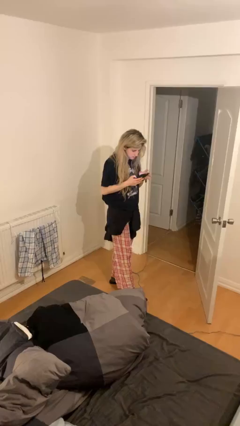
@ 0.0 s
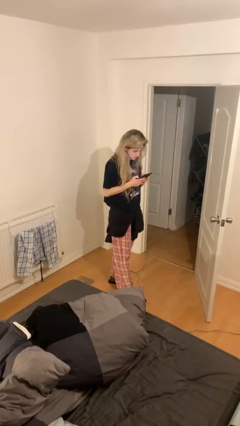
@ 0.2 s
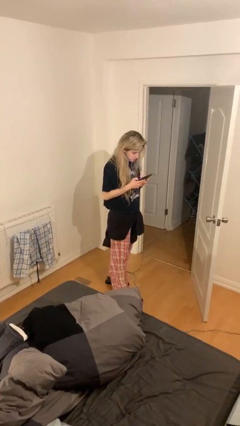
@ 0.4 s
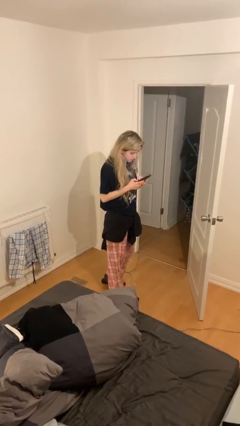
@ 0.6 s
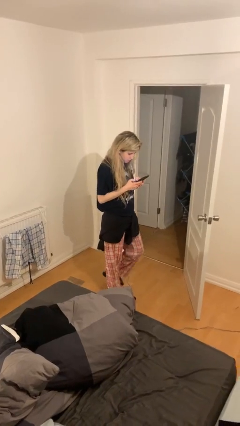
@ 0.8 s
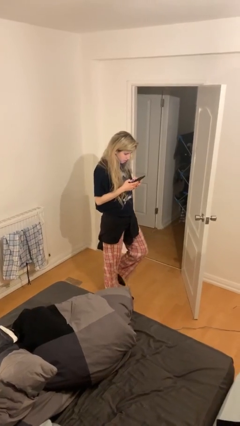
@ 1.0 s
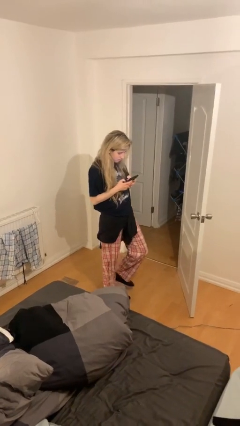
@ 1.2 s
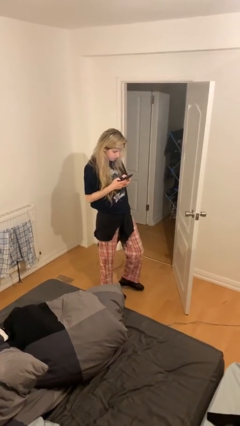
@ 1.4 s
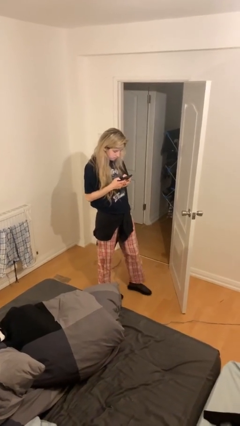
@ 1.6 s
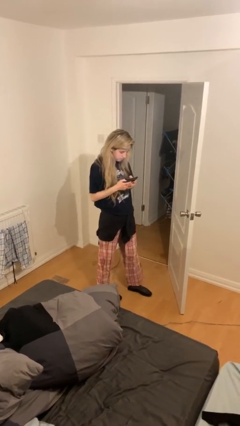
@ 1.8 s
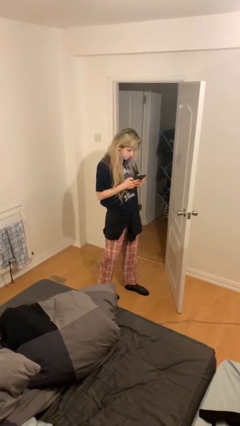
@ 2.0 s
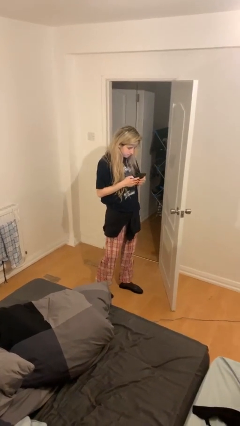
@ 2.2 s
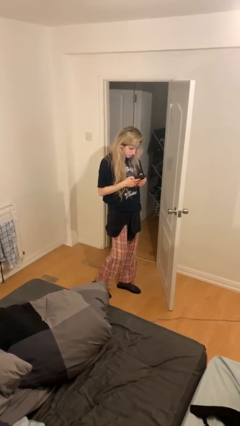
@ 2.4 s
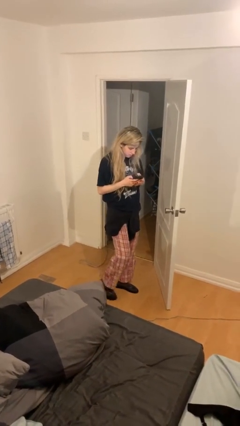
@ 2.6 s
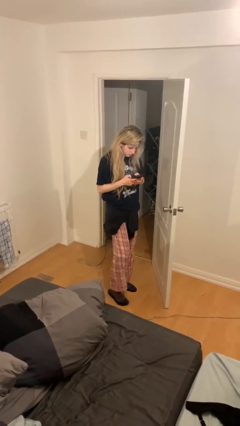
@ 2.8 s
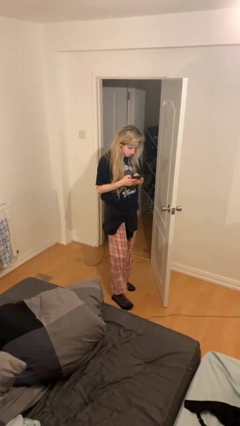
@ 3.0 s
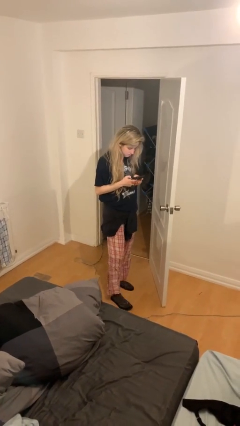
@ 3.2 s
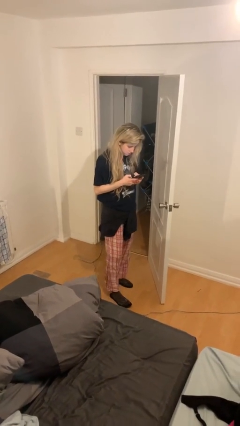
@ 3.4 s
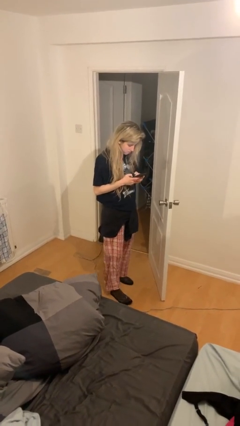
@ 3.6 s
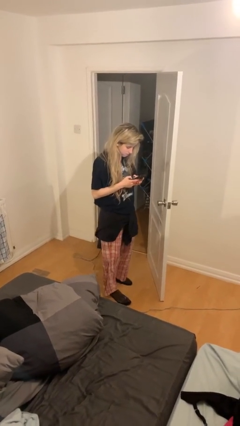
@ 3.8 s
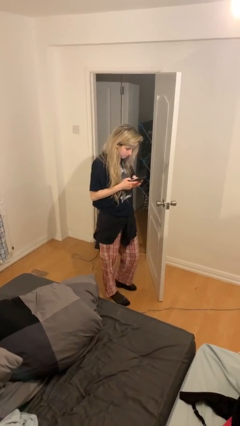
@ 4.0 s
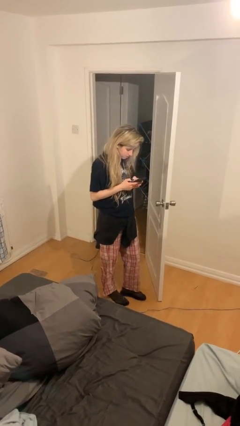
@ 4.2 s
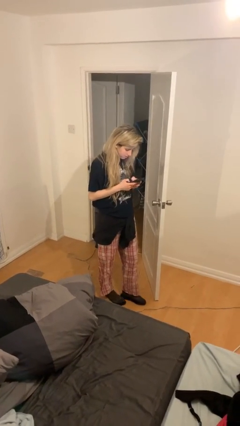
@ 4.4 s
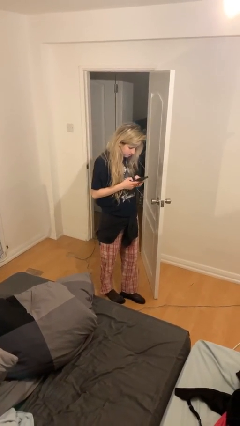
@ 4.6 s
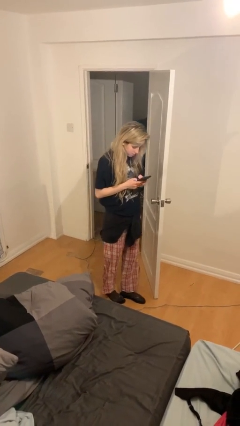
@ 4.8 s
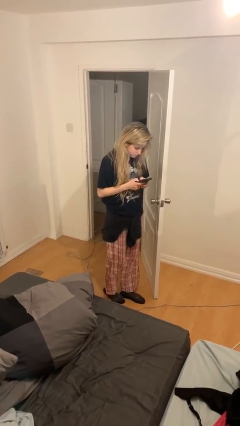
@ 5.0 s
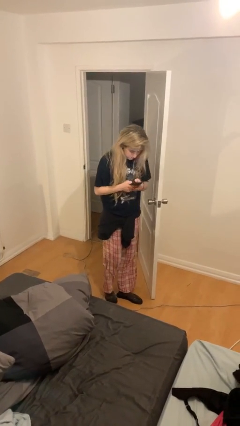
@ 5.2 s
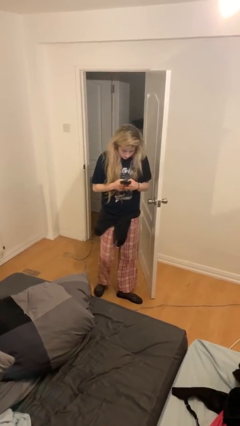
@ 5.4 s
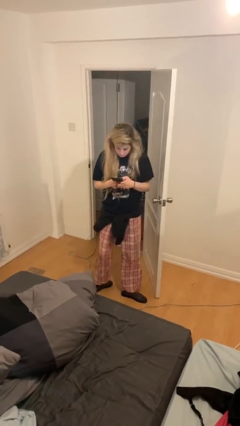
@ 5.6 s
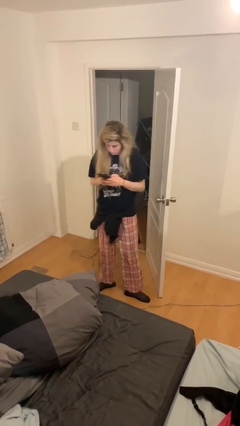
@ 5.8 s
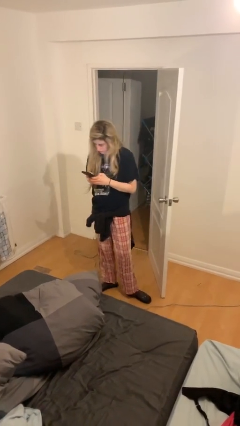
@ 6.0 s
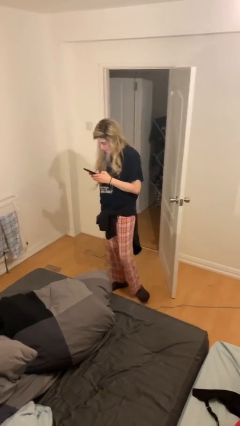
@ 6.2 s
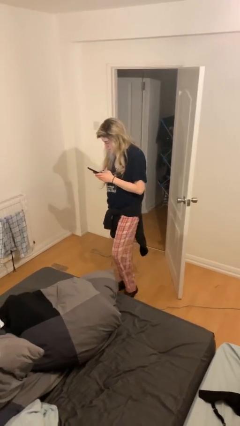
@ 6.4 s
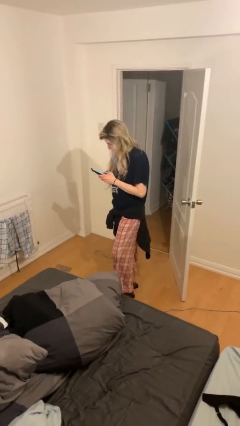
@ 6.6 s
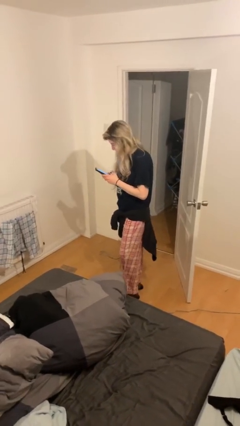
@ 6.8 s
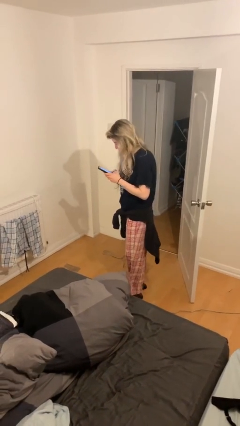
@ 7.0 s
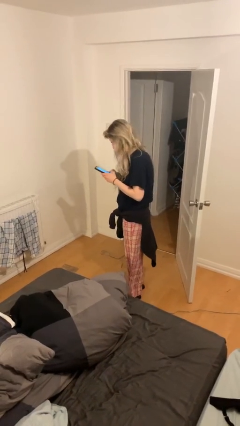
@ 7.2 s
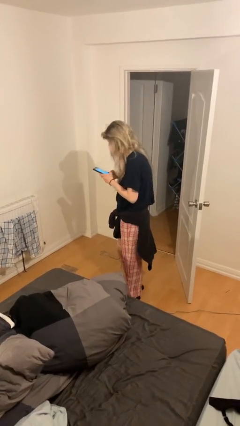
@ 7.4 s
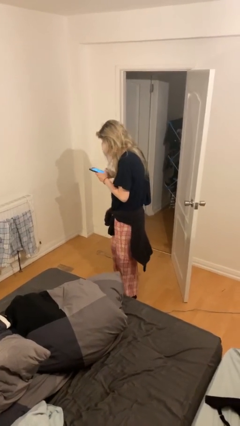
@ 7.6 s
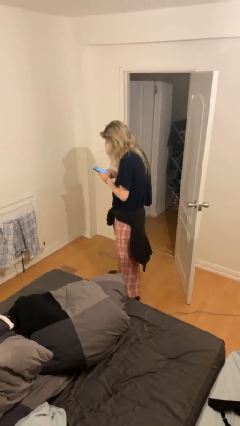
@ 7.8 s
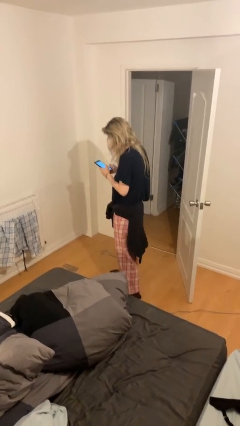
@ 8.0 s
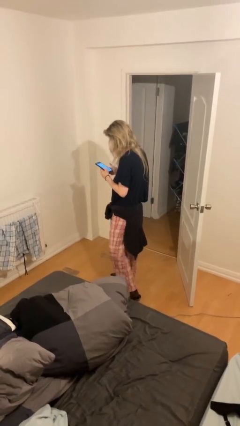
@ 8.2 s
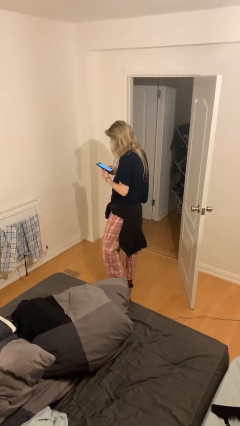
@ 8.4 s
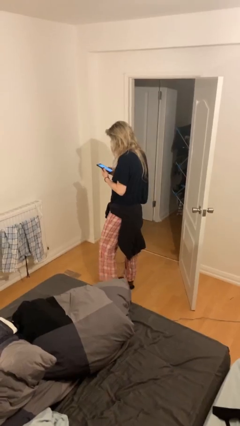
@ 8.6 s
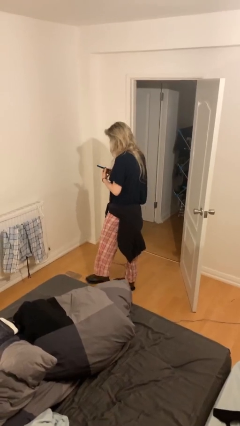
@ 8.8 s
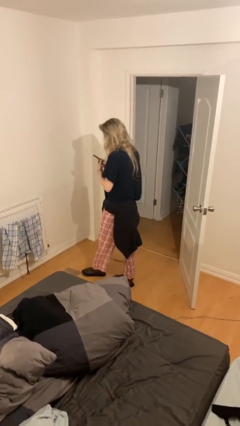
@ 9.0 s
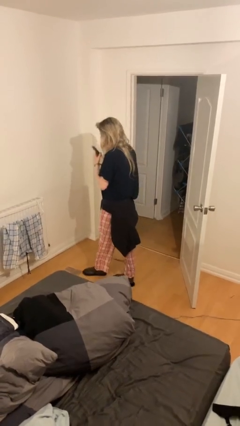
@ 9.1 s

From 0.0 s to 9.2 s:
person texts on phone

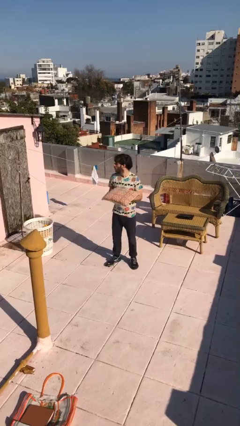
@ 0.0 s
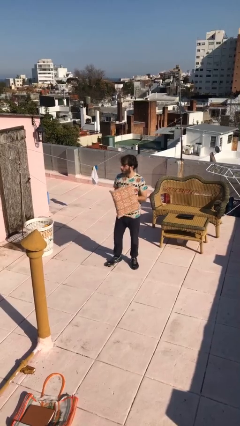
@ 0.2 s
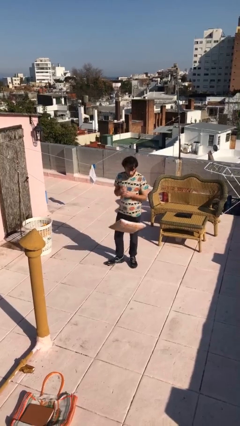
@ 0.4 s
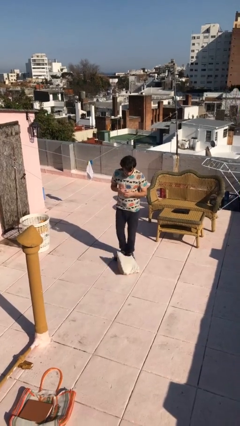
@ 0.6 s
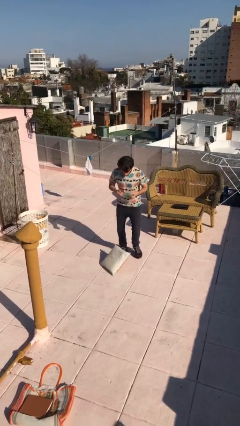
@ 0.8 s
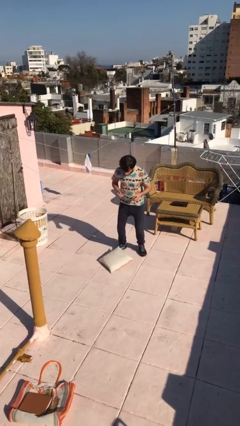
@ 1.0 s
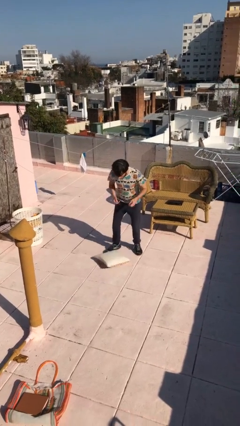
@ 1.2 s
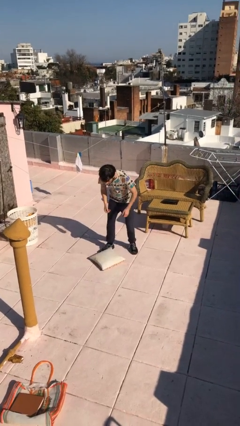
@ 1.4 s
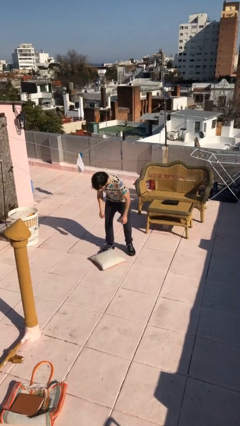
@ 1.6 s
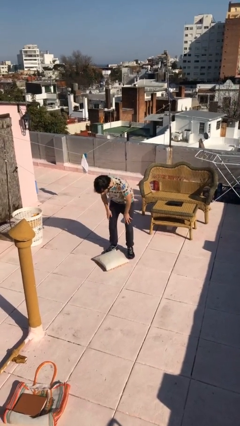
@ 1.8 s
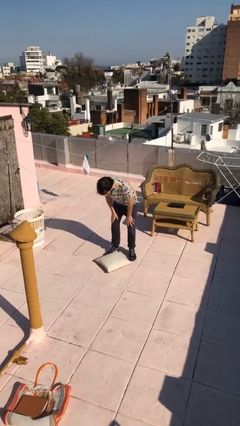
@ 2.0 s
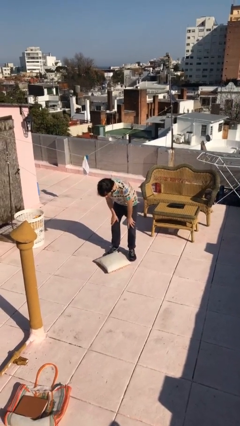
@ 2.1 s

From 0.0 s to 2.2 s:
person drops object

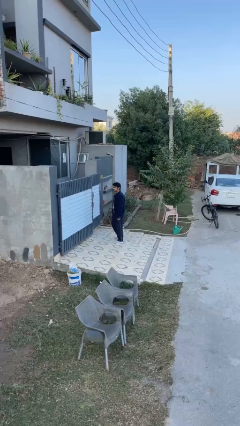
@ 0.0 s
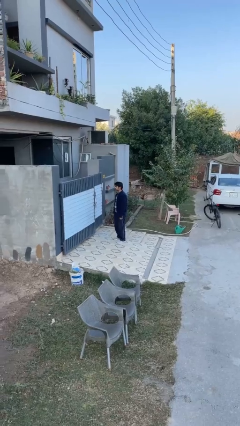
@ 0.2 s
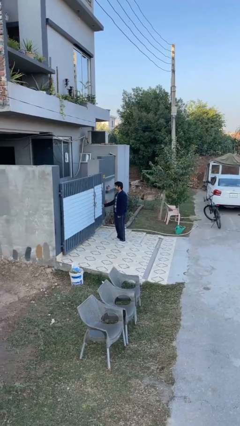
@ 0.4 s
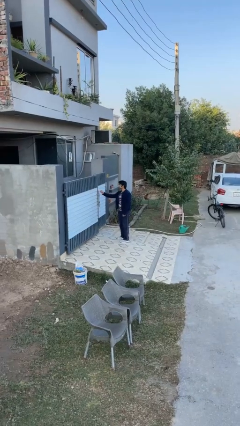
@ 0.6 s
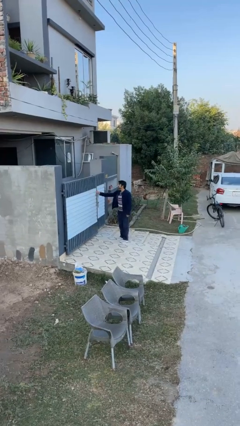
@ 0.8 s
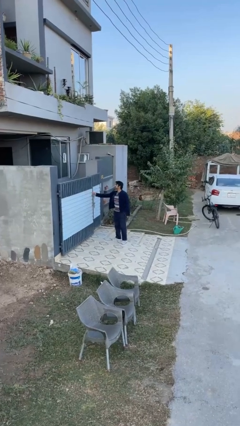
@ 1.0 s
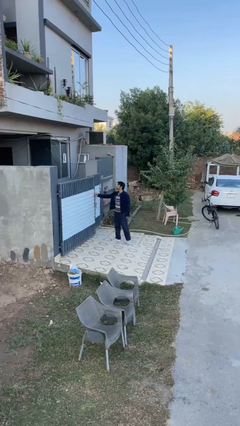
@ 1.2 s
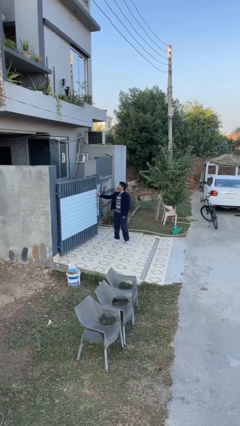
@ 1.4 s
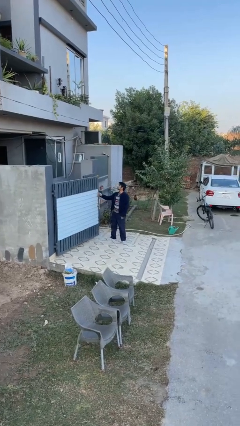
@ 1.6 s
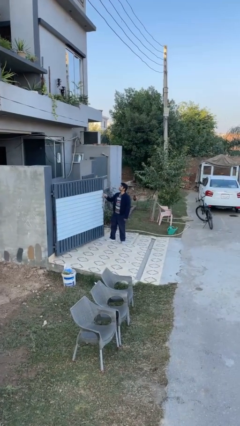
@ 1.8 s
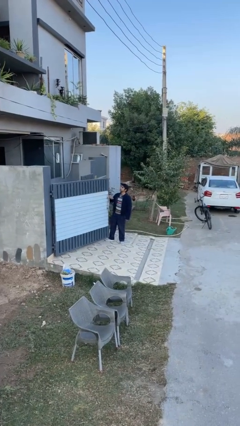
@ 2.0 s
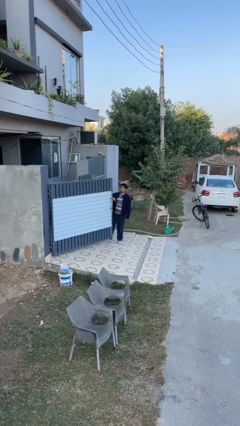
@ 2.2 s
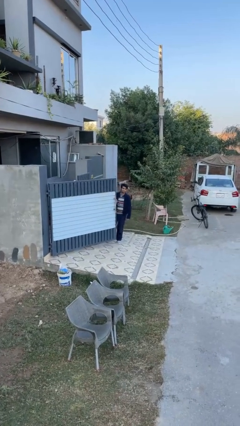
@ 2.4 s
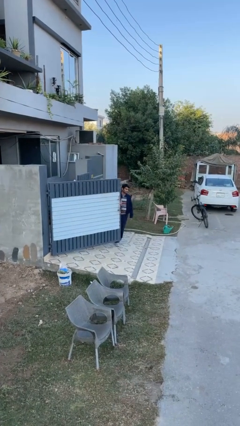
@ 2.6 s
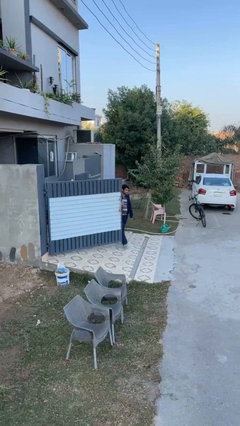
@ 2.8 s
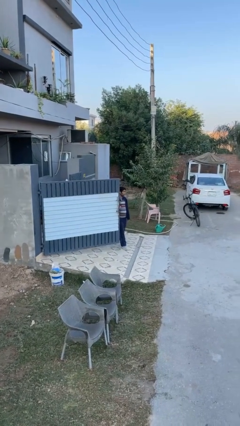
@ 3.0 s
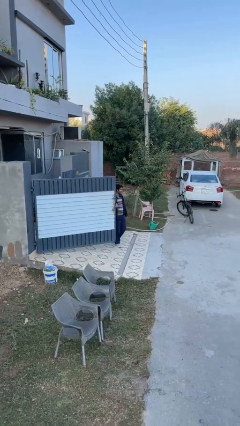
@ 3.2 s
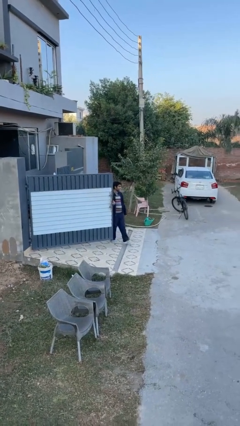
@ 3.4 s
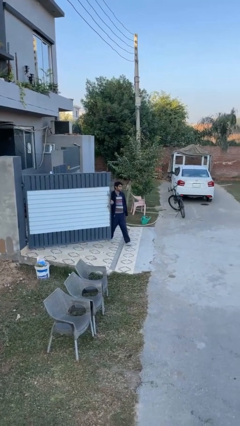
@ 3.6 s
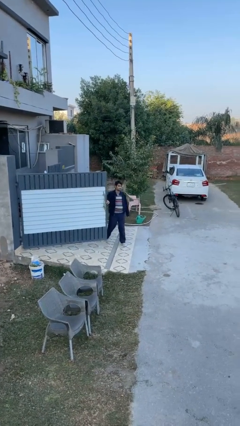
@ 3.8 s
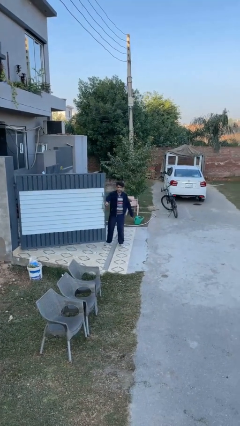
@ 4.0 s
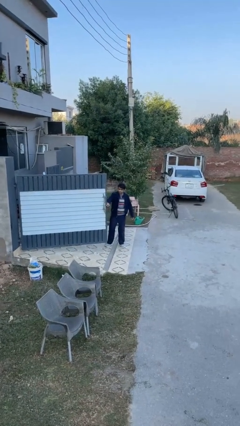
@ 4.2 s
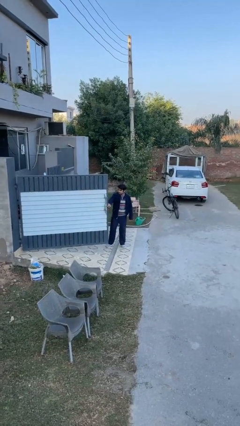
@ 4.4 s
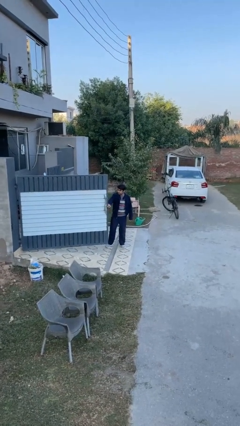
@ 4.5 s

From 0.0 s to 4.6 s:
person opens facility door

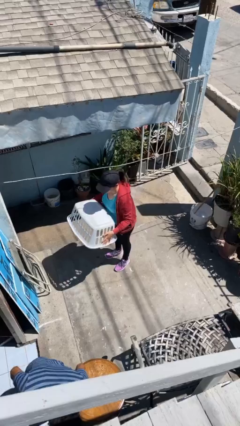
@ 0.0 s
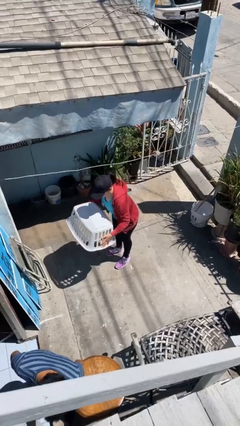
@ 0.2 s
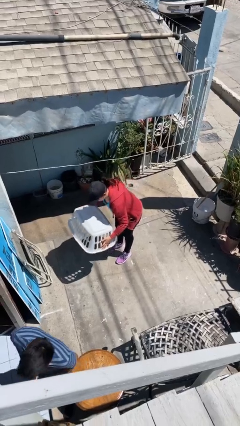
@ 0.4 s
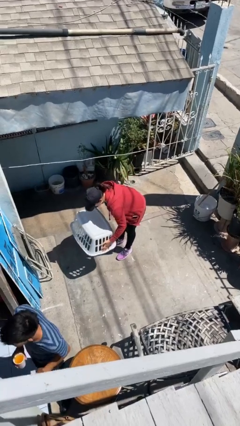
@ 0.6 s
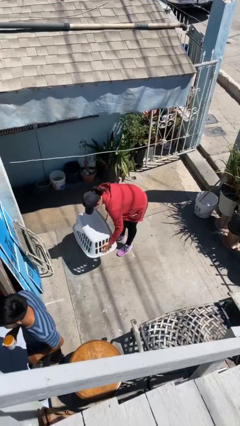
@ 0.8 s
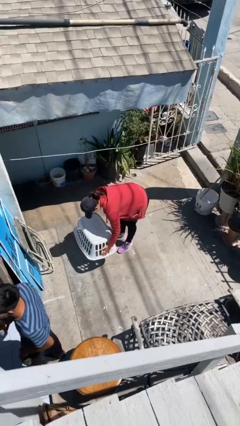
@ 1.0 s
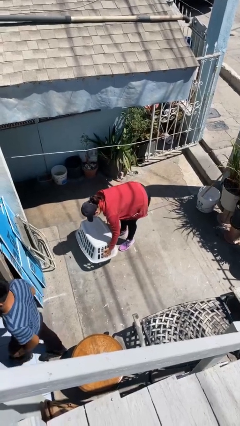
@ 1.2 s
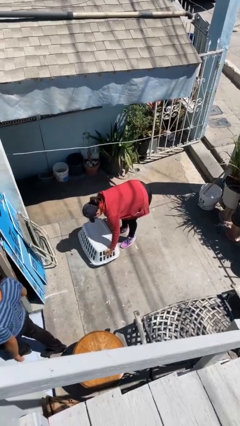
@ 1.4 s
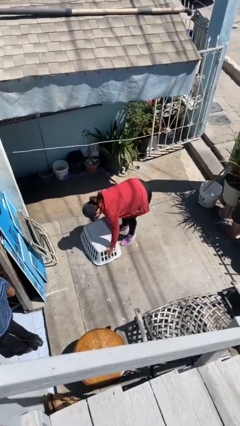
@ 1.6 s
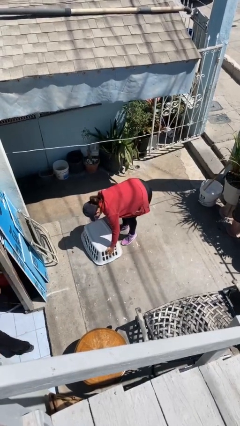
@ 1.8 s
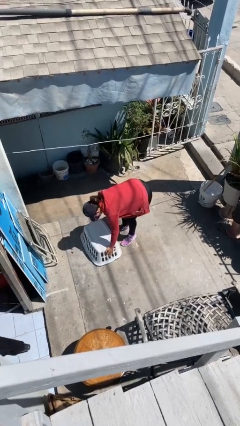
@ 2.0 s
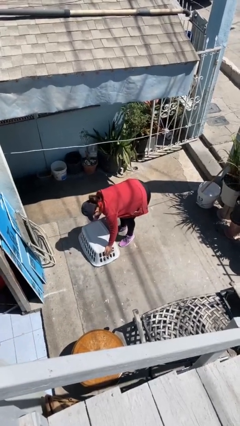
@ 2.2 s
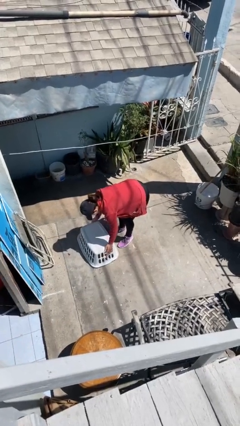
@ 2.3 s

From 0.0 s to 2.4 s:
person puts down object on floor
